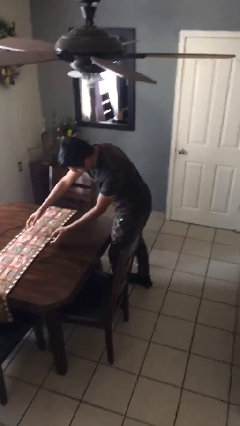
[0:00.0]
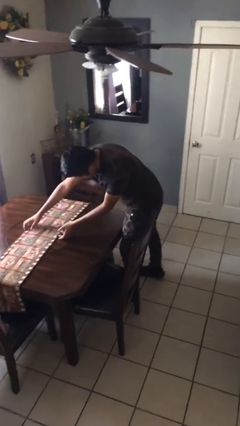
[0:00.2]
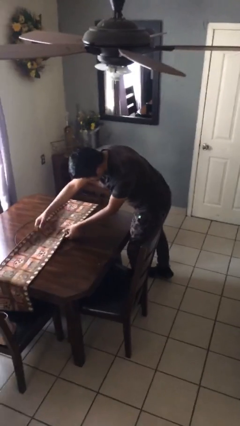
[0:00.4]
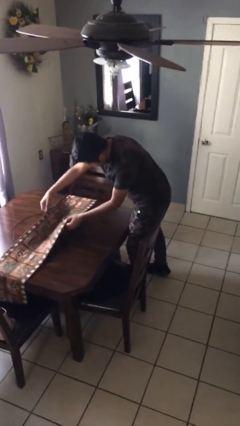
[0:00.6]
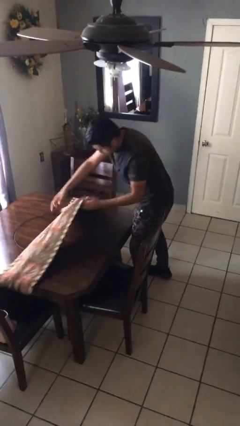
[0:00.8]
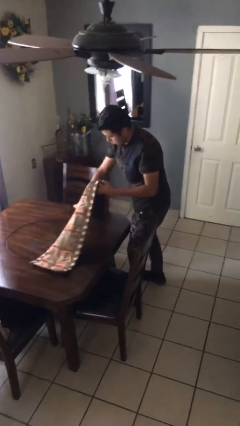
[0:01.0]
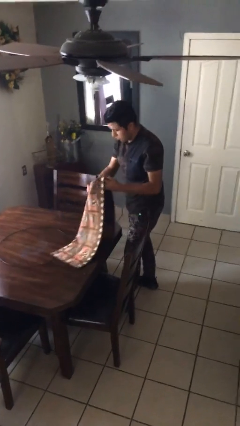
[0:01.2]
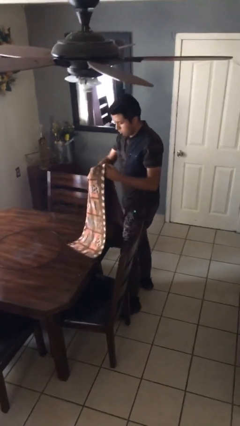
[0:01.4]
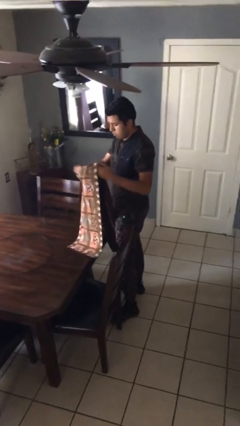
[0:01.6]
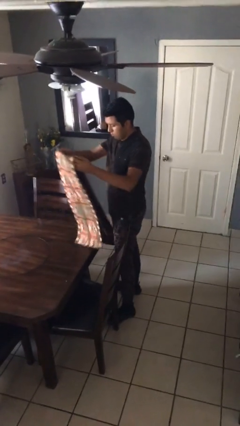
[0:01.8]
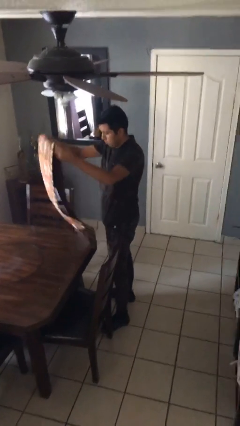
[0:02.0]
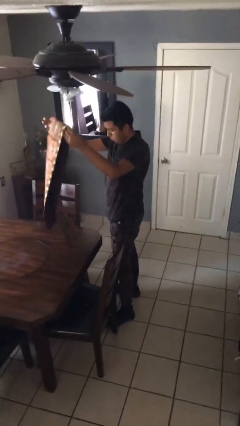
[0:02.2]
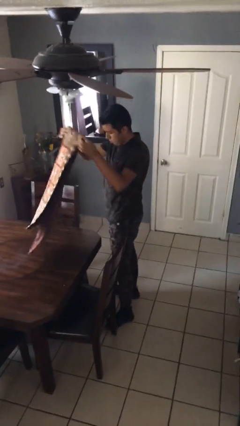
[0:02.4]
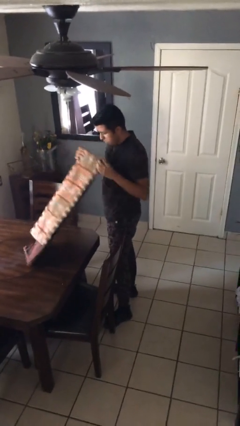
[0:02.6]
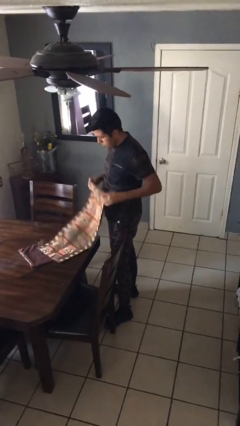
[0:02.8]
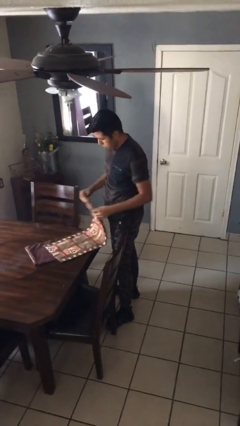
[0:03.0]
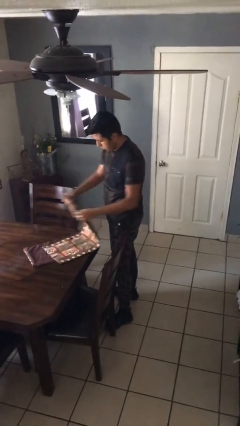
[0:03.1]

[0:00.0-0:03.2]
person folds tablecloth

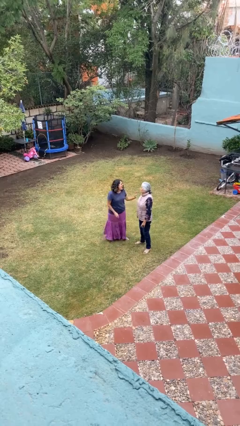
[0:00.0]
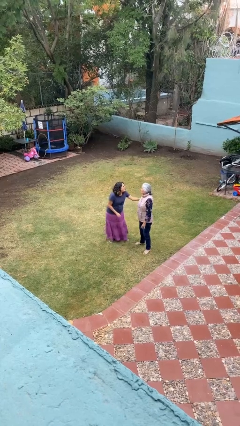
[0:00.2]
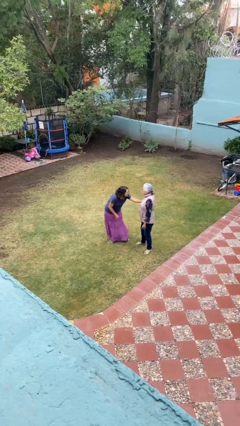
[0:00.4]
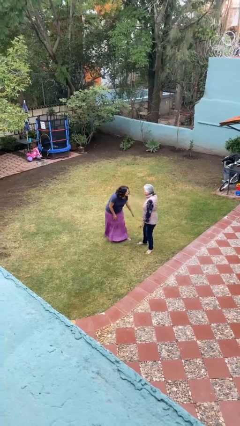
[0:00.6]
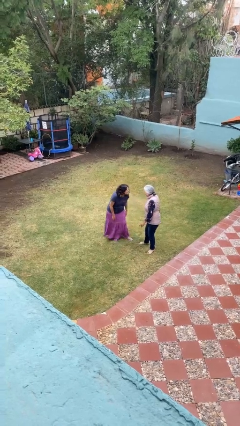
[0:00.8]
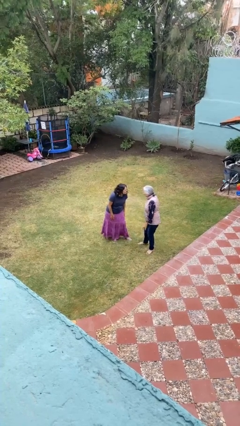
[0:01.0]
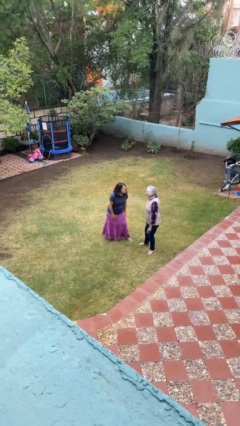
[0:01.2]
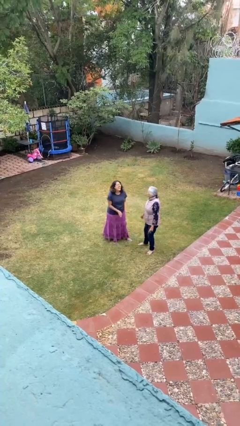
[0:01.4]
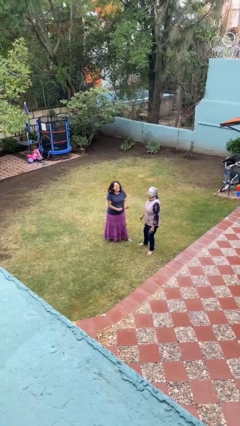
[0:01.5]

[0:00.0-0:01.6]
person shoves person

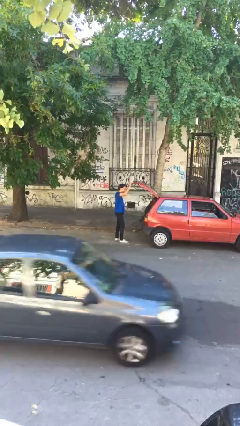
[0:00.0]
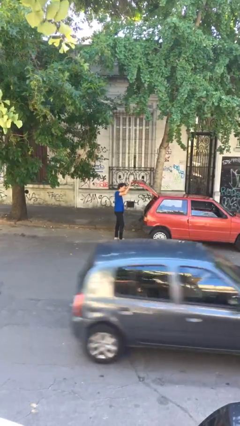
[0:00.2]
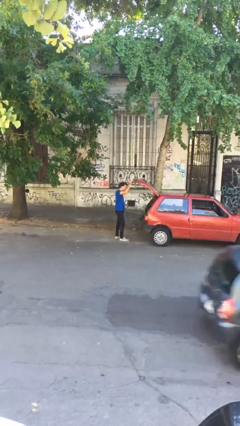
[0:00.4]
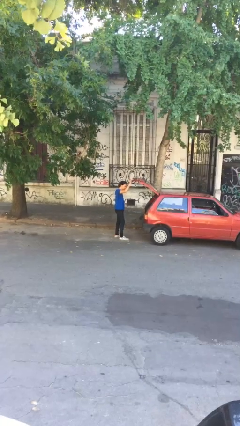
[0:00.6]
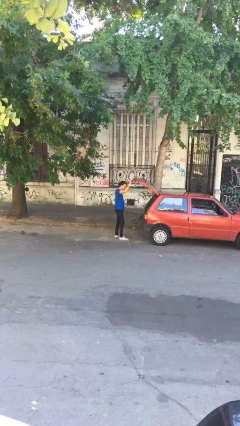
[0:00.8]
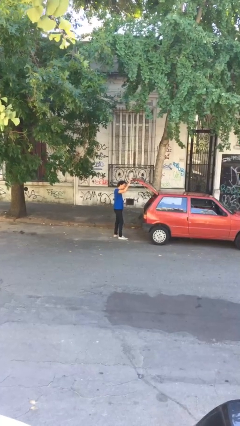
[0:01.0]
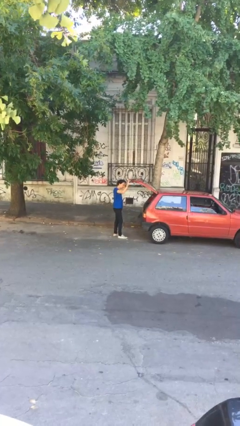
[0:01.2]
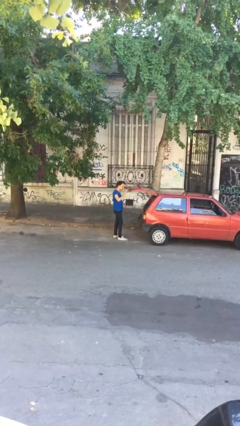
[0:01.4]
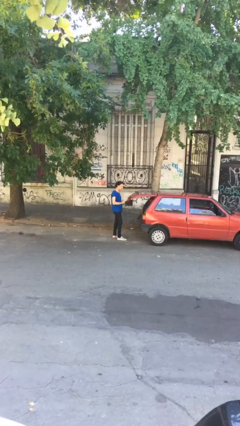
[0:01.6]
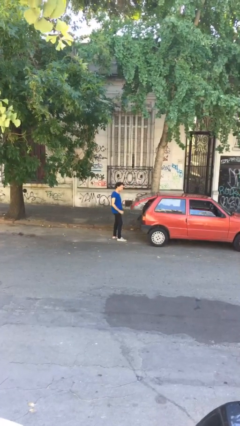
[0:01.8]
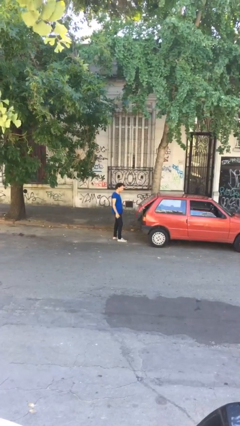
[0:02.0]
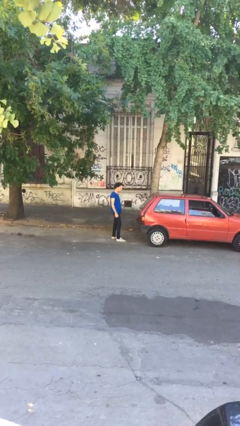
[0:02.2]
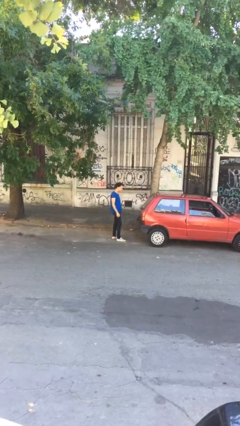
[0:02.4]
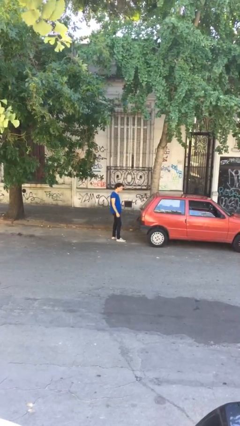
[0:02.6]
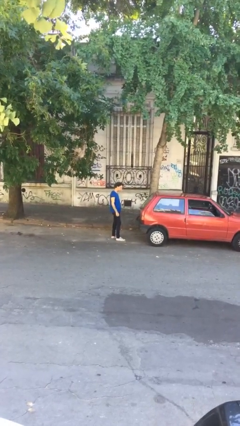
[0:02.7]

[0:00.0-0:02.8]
person closes car trunk

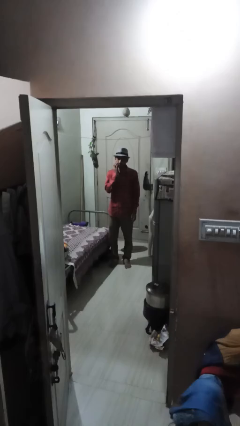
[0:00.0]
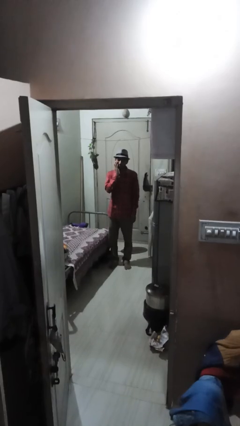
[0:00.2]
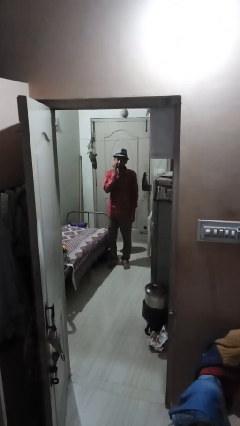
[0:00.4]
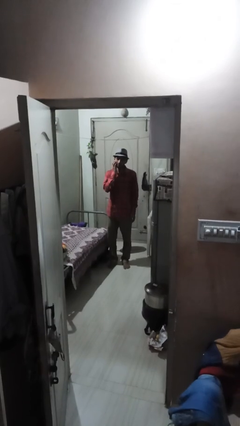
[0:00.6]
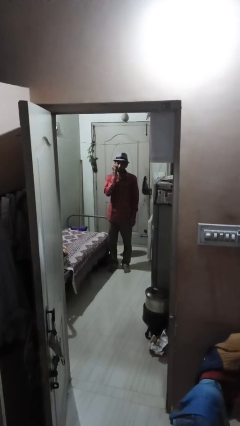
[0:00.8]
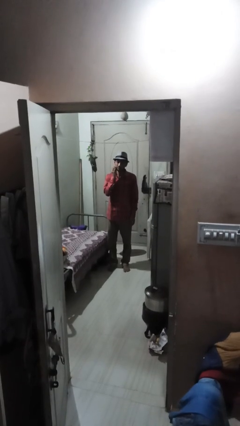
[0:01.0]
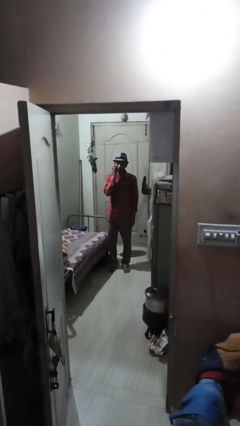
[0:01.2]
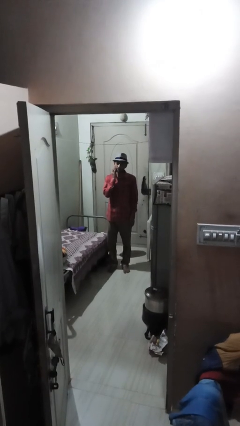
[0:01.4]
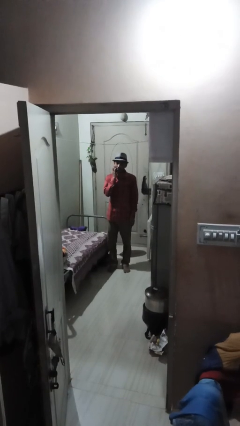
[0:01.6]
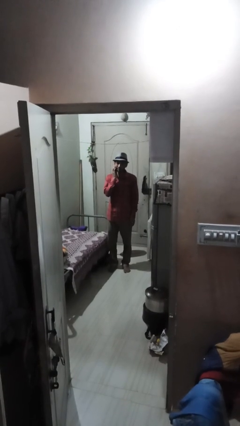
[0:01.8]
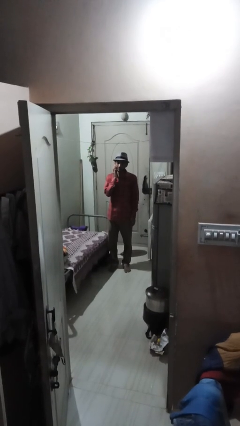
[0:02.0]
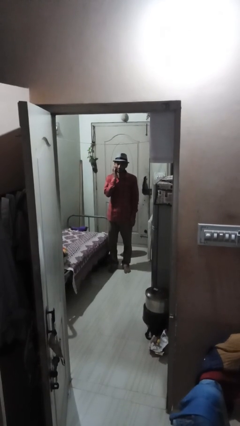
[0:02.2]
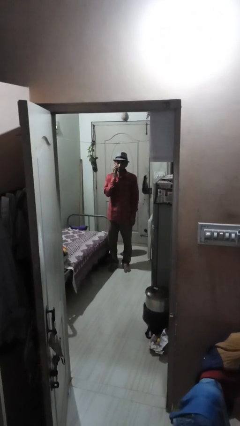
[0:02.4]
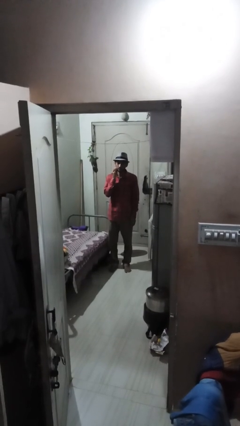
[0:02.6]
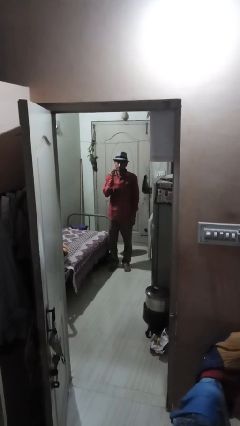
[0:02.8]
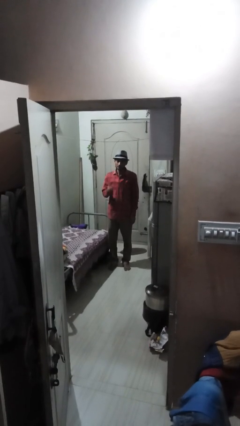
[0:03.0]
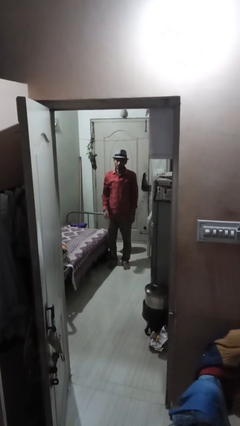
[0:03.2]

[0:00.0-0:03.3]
person scratches face

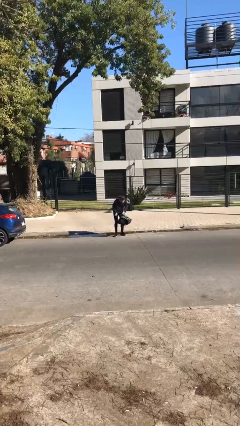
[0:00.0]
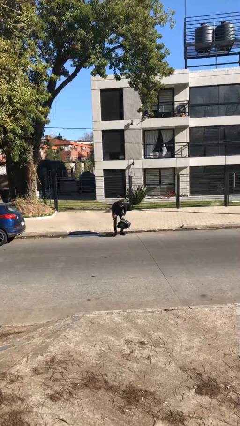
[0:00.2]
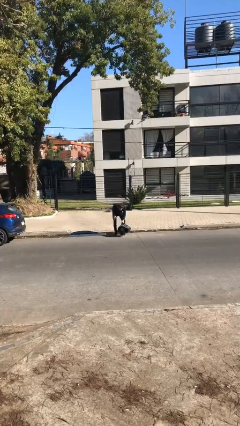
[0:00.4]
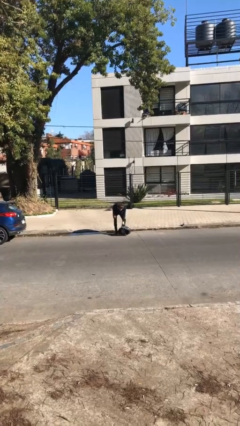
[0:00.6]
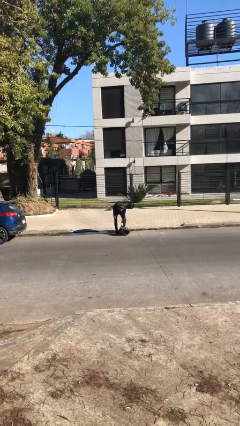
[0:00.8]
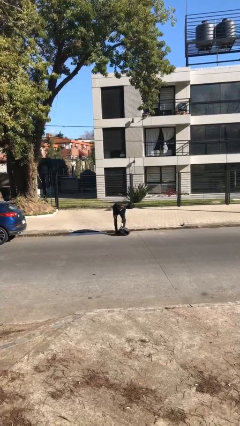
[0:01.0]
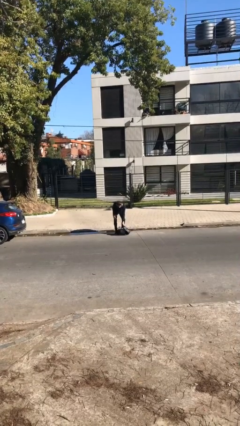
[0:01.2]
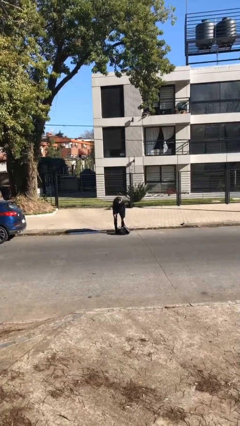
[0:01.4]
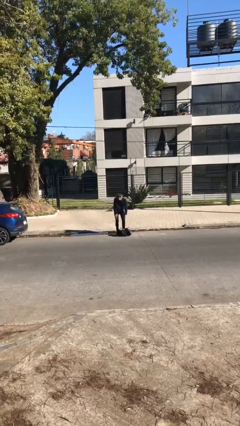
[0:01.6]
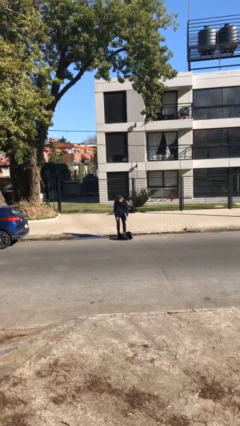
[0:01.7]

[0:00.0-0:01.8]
person puts down object on floor

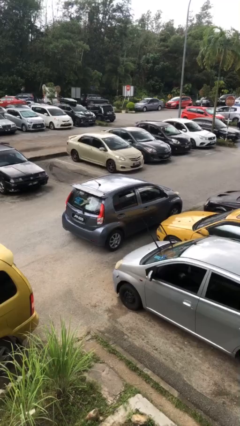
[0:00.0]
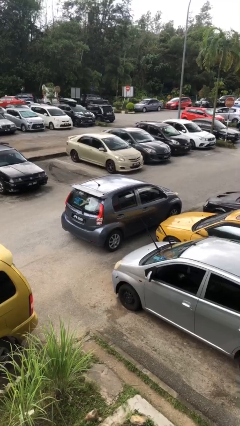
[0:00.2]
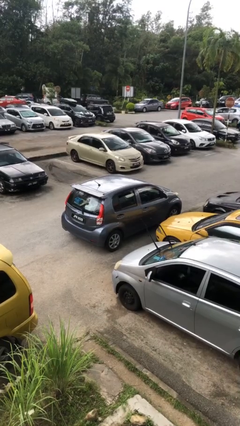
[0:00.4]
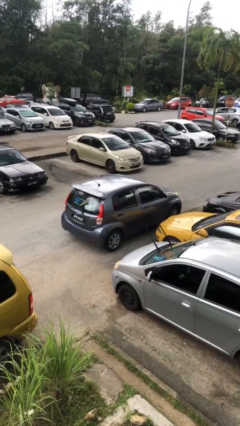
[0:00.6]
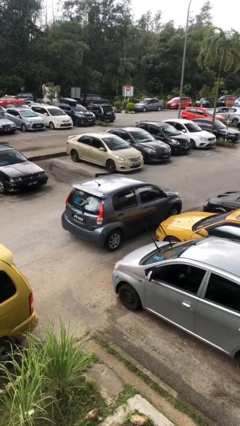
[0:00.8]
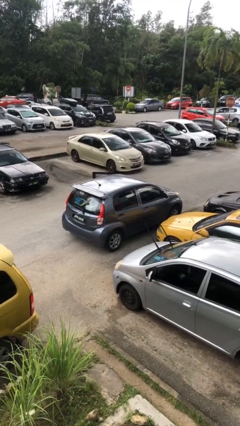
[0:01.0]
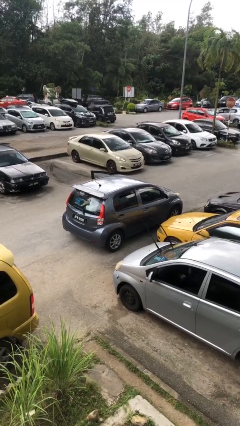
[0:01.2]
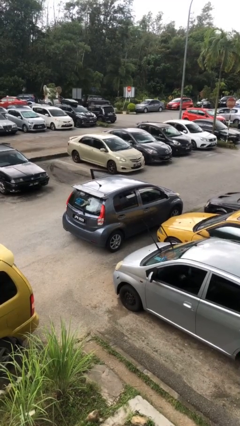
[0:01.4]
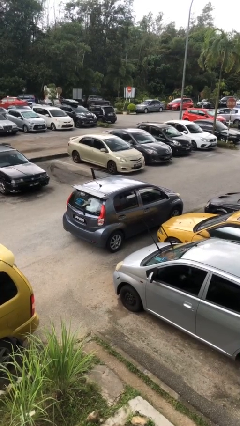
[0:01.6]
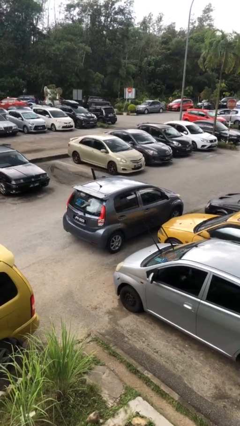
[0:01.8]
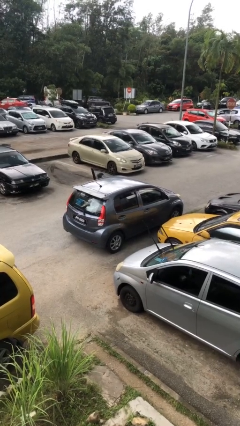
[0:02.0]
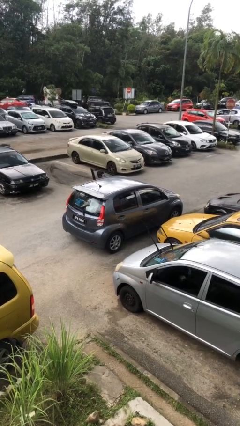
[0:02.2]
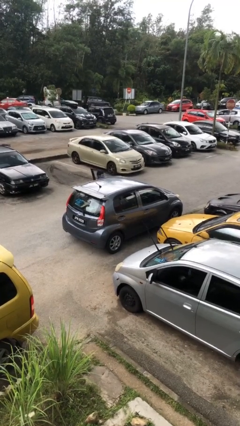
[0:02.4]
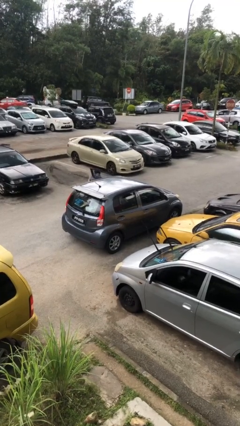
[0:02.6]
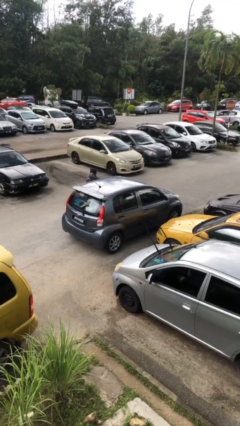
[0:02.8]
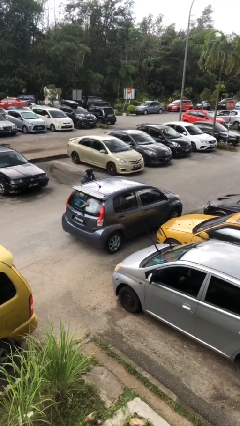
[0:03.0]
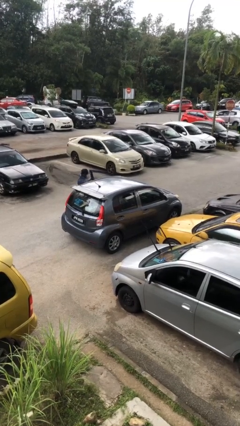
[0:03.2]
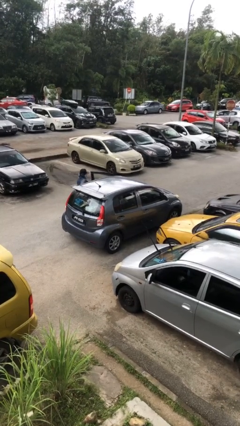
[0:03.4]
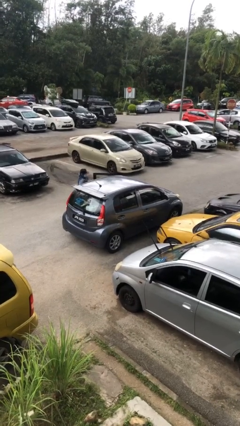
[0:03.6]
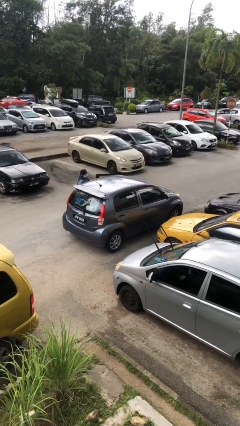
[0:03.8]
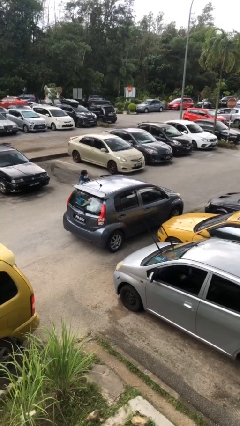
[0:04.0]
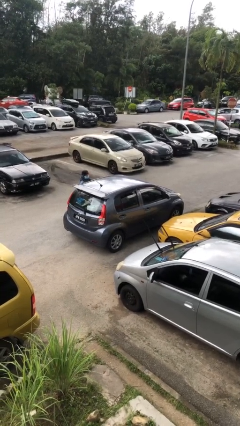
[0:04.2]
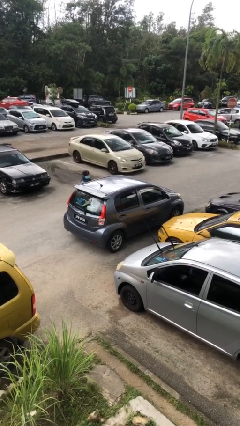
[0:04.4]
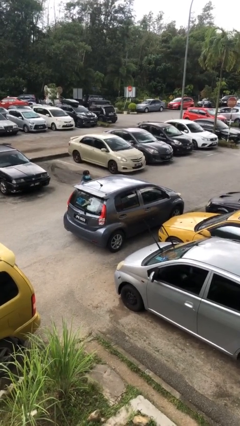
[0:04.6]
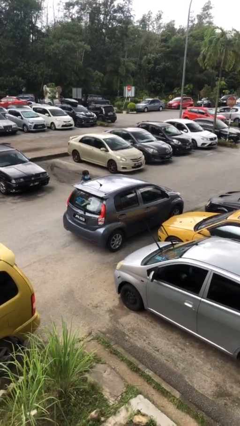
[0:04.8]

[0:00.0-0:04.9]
car drops off person
